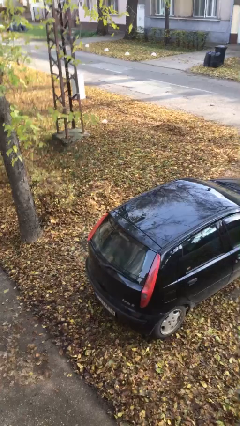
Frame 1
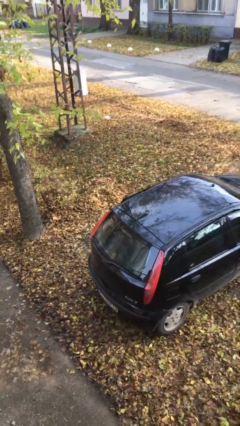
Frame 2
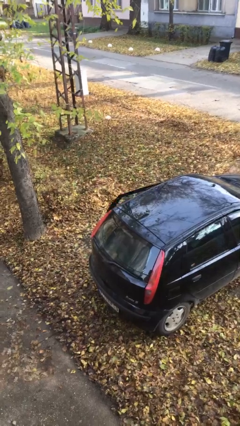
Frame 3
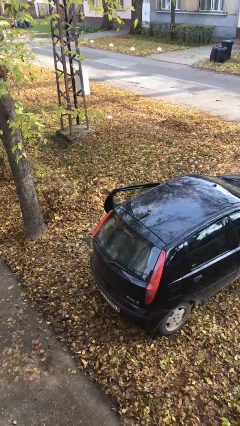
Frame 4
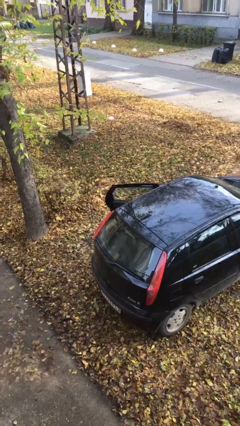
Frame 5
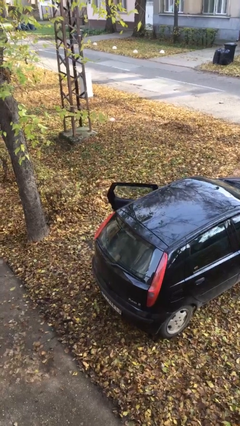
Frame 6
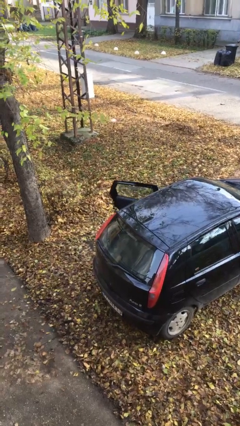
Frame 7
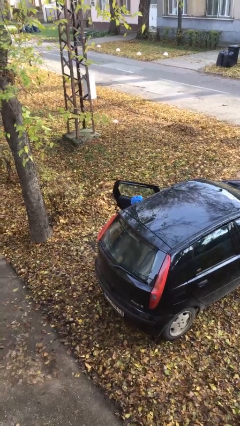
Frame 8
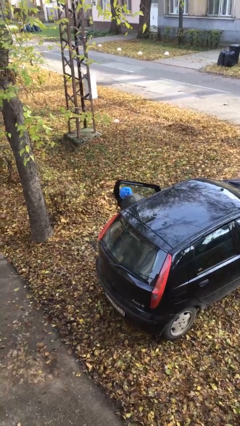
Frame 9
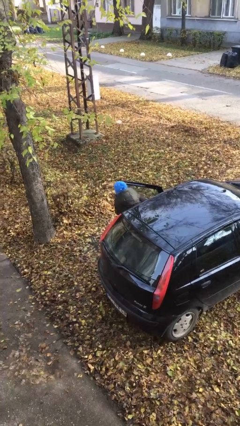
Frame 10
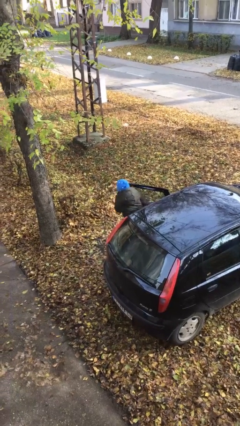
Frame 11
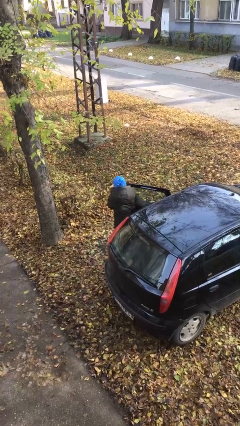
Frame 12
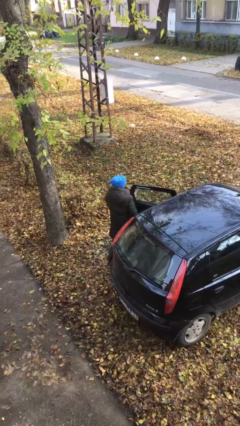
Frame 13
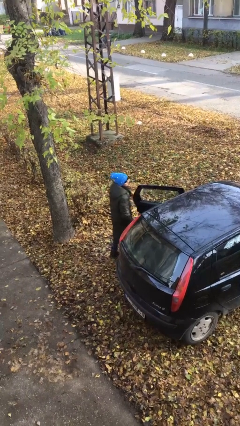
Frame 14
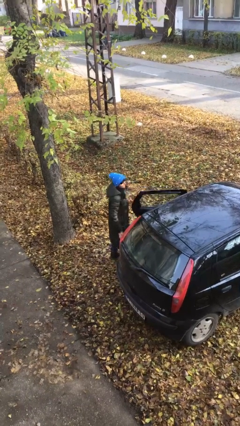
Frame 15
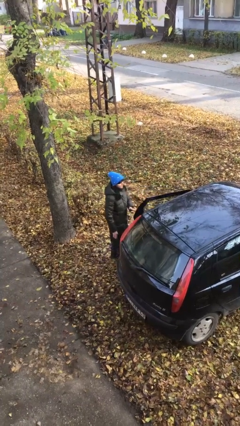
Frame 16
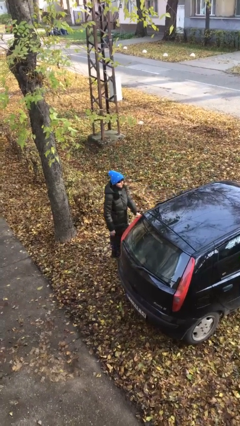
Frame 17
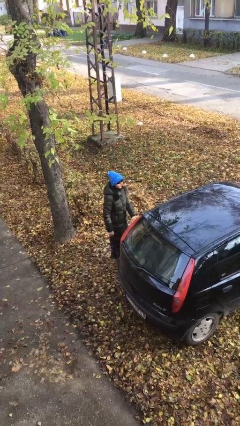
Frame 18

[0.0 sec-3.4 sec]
person exits car

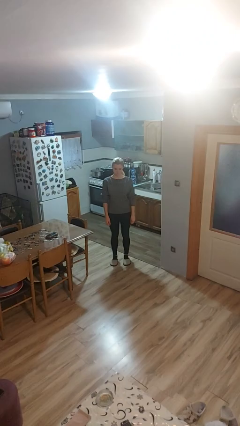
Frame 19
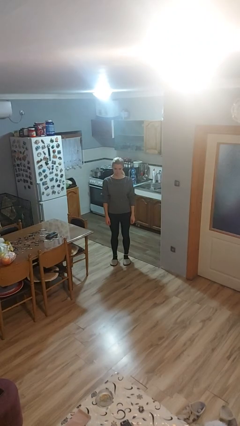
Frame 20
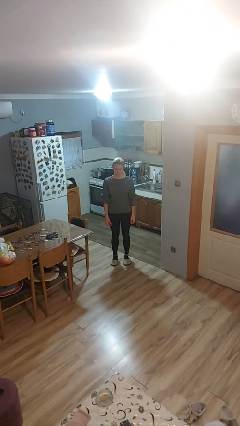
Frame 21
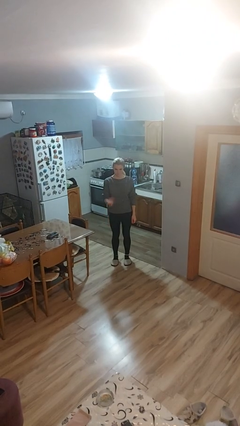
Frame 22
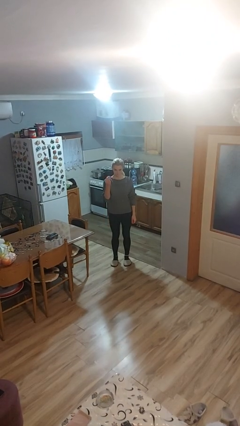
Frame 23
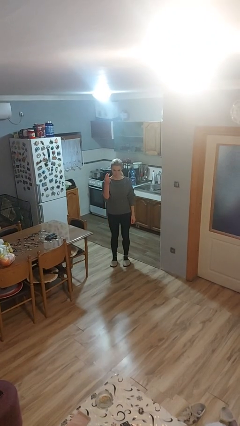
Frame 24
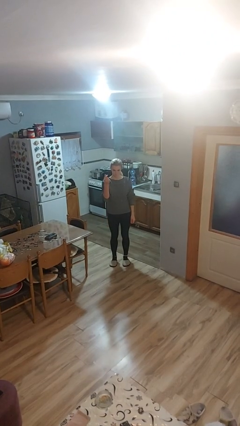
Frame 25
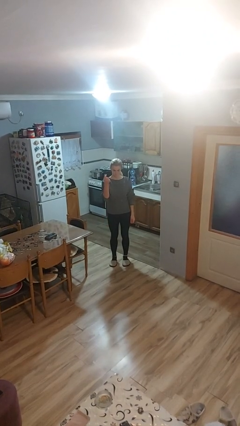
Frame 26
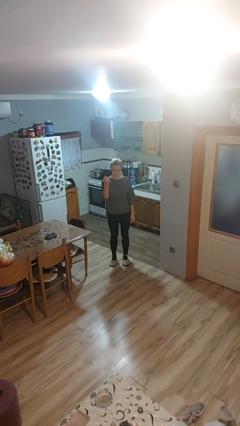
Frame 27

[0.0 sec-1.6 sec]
person snaps fingers

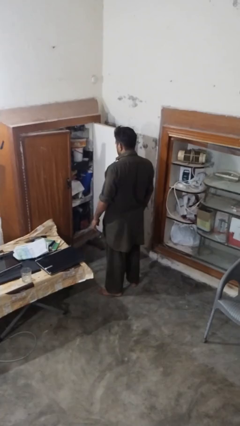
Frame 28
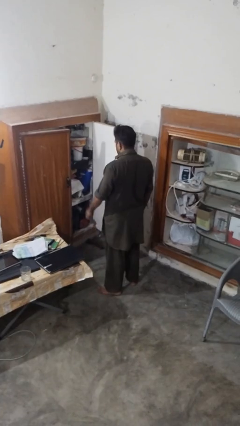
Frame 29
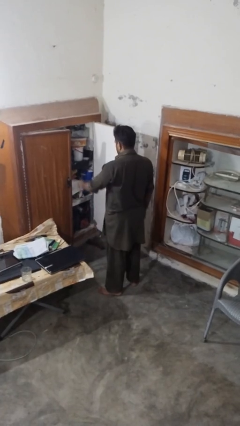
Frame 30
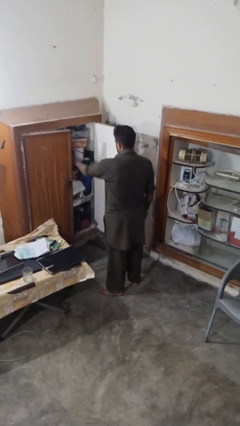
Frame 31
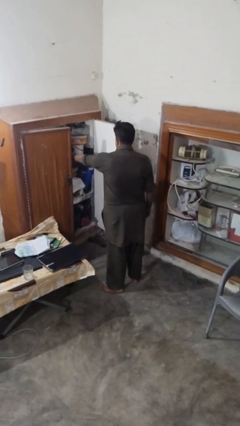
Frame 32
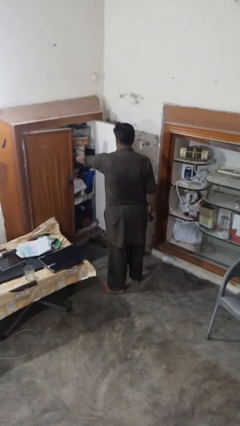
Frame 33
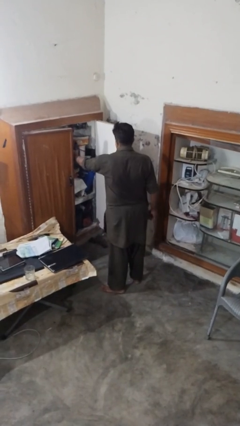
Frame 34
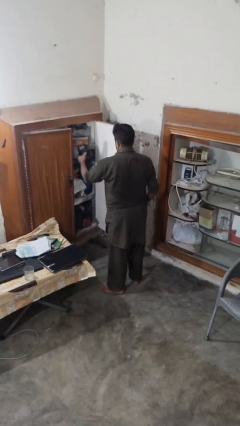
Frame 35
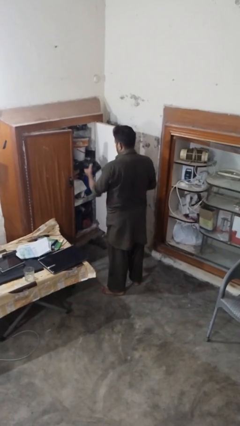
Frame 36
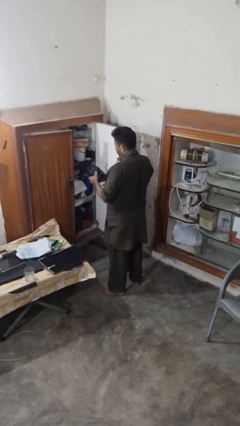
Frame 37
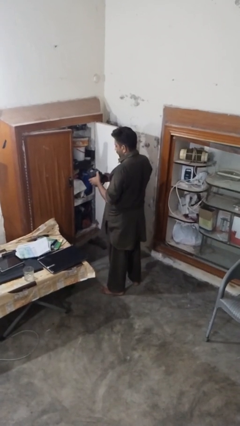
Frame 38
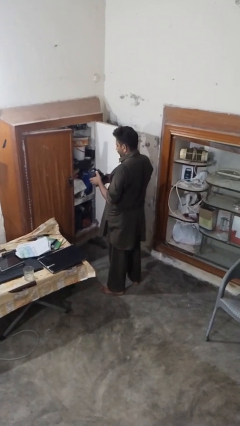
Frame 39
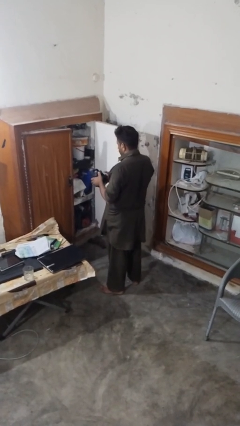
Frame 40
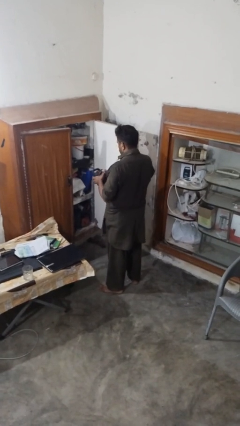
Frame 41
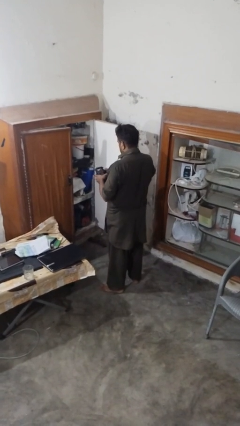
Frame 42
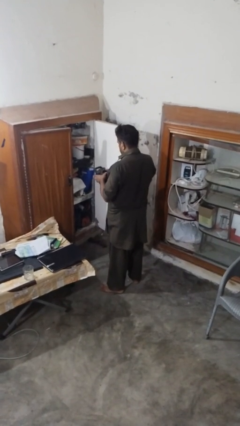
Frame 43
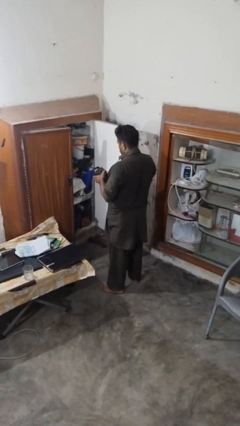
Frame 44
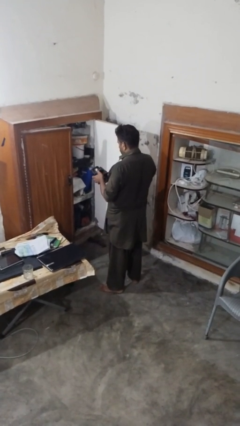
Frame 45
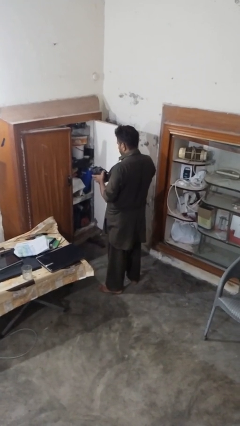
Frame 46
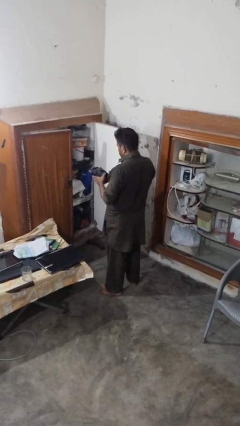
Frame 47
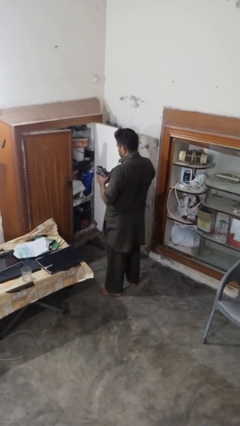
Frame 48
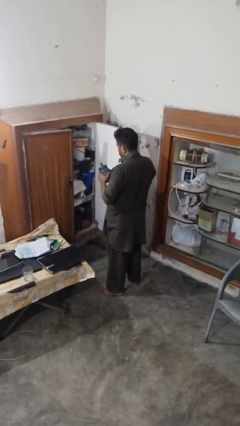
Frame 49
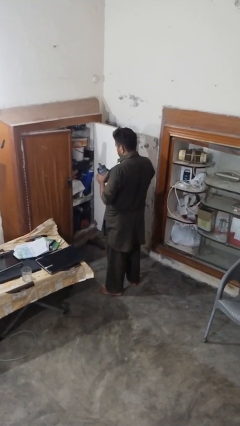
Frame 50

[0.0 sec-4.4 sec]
person picks up object from cabinet

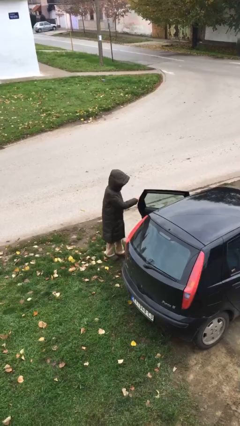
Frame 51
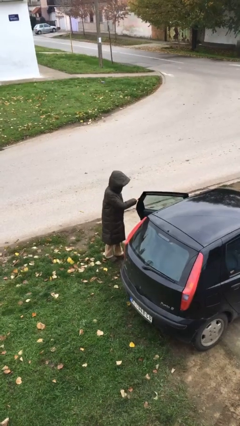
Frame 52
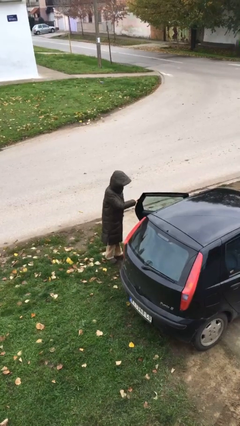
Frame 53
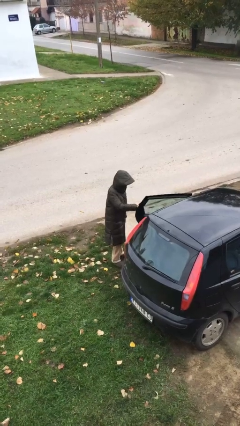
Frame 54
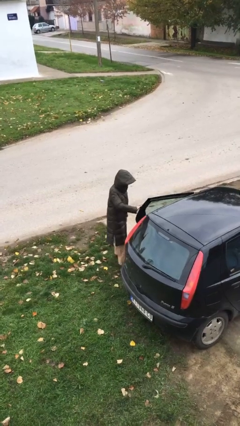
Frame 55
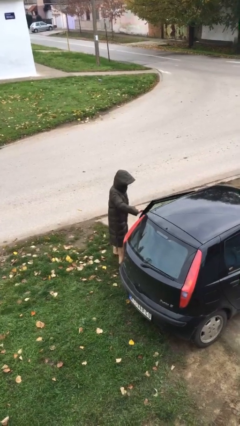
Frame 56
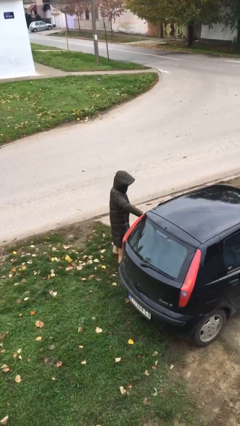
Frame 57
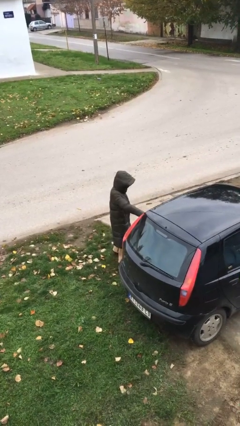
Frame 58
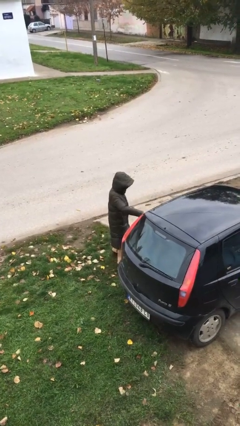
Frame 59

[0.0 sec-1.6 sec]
person closes car door

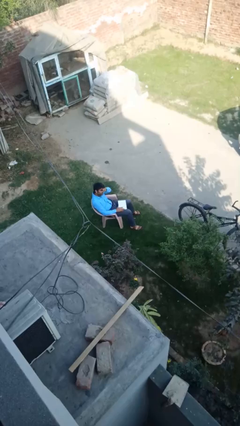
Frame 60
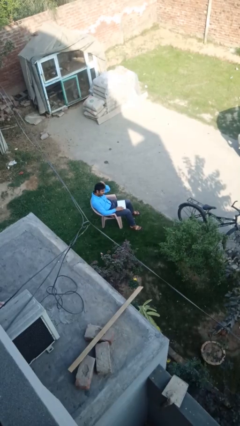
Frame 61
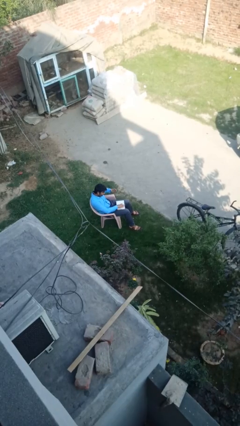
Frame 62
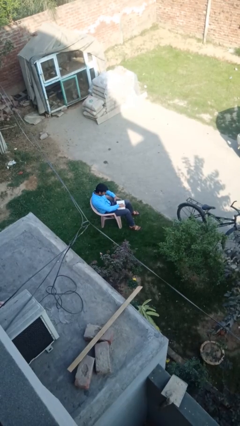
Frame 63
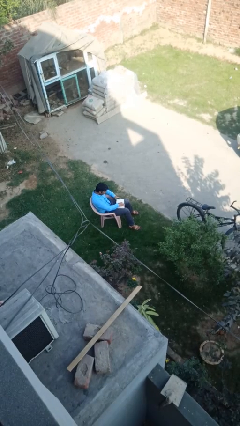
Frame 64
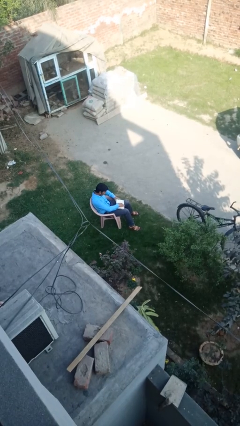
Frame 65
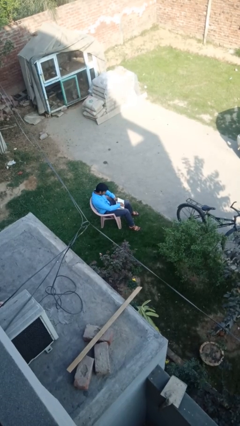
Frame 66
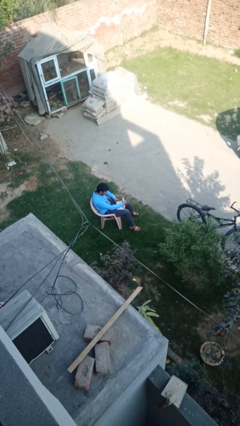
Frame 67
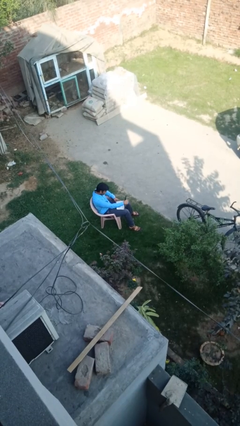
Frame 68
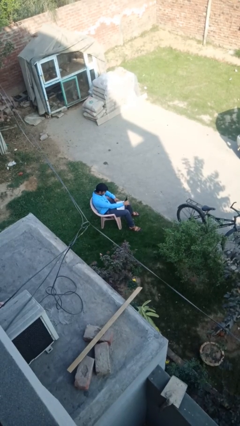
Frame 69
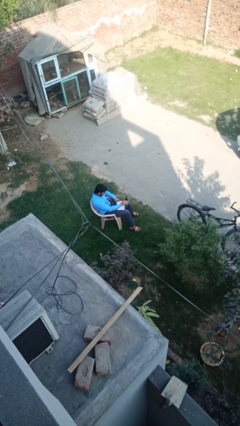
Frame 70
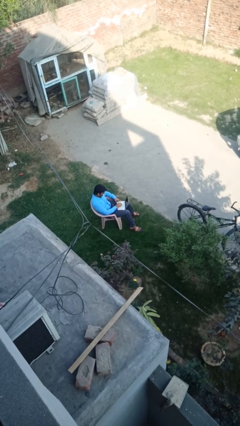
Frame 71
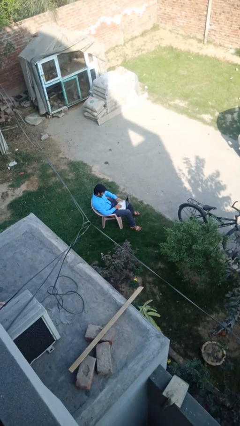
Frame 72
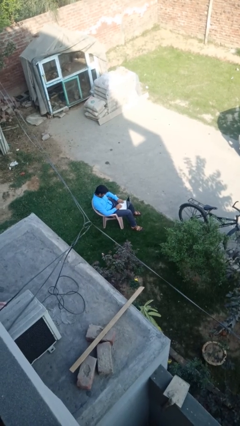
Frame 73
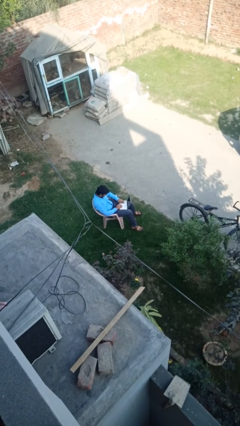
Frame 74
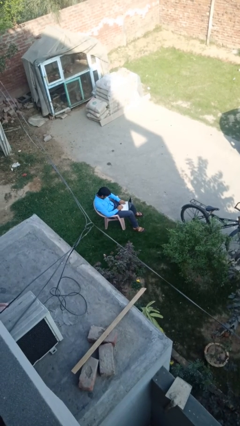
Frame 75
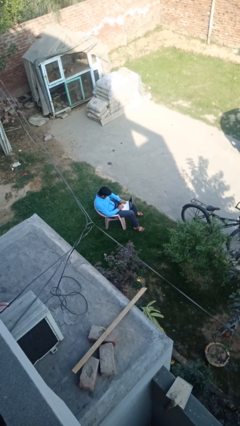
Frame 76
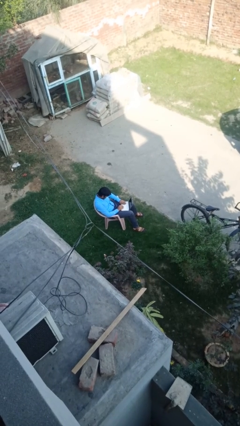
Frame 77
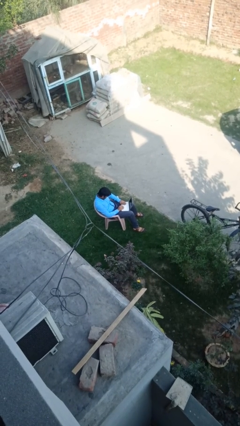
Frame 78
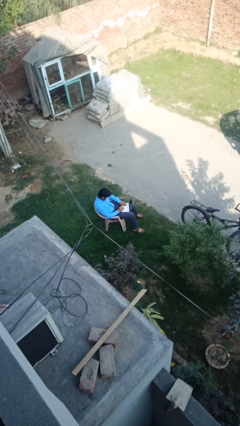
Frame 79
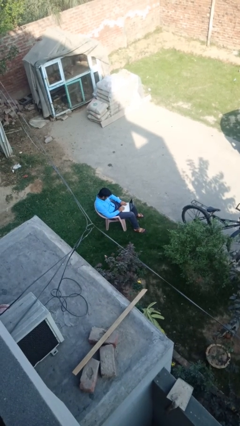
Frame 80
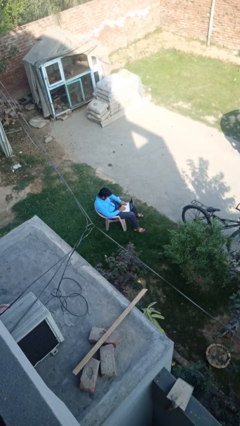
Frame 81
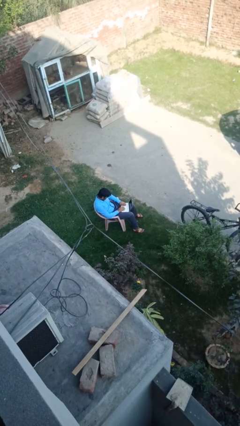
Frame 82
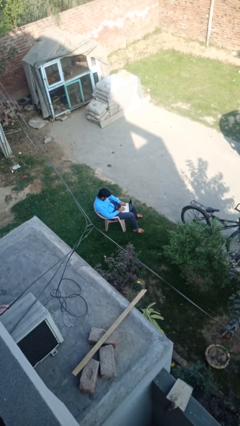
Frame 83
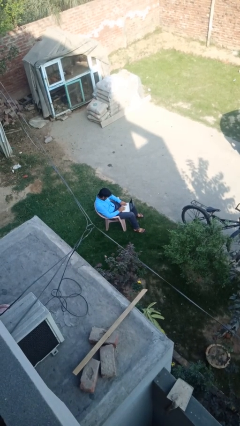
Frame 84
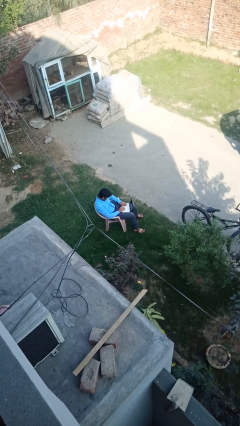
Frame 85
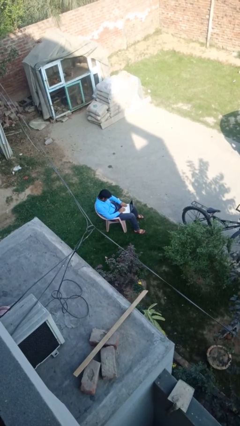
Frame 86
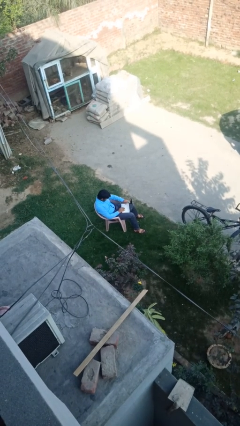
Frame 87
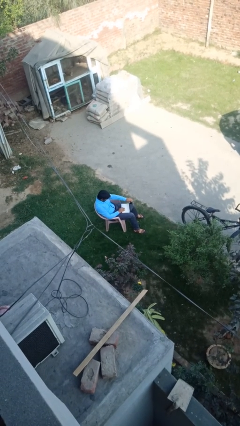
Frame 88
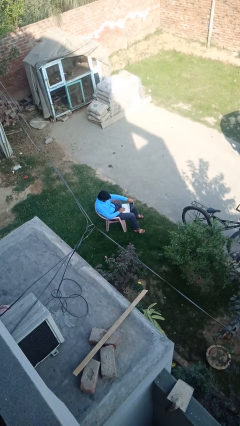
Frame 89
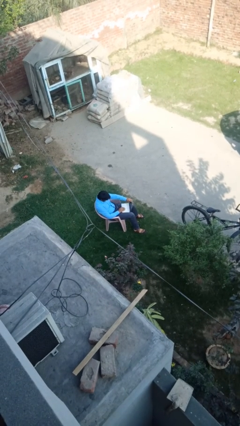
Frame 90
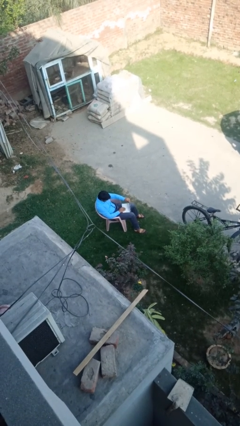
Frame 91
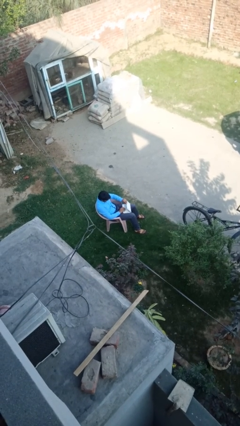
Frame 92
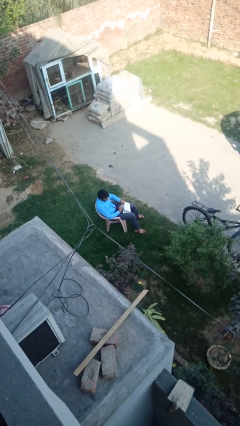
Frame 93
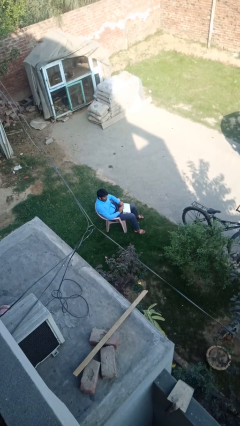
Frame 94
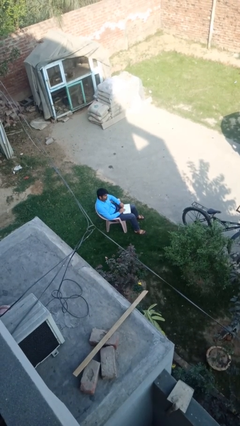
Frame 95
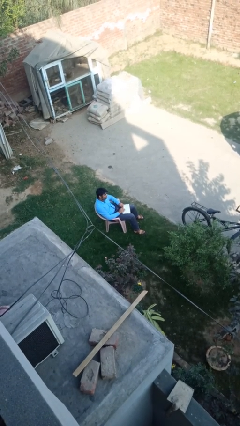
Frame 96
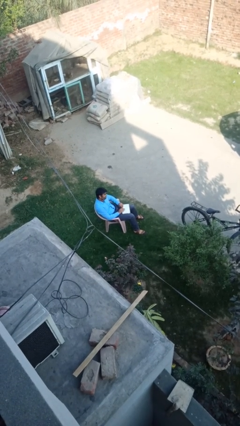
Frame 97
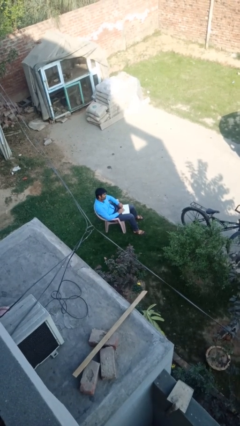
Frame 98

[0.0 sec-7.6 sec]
person interacts with laptop
